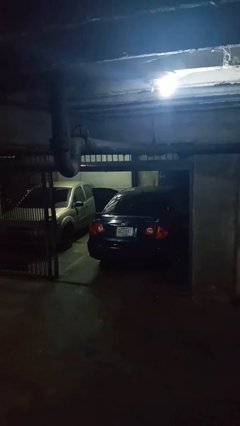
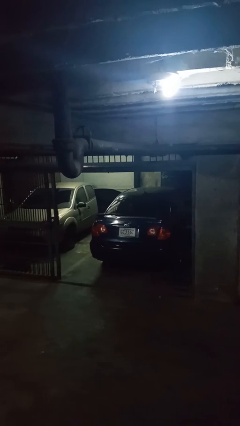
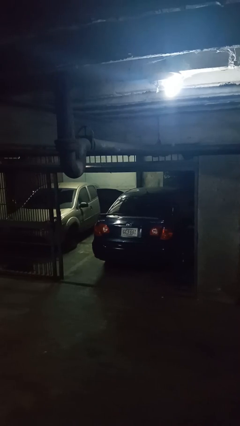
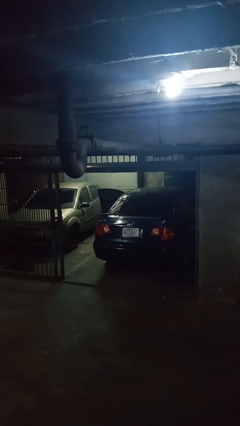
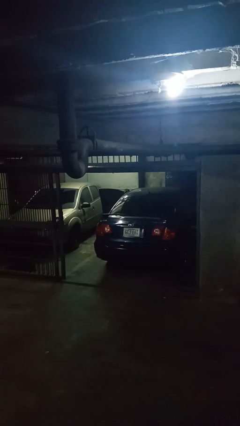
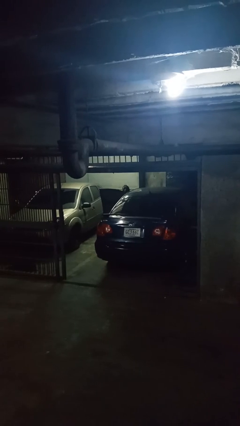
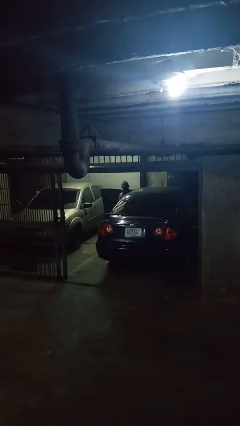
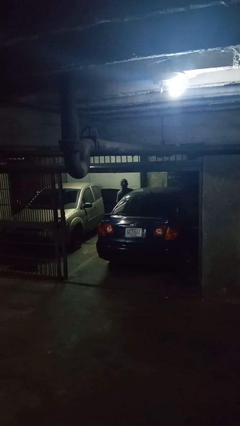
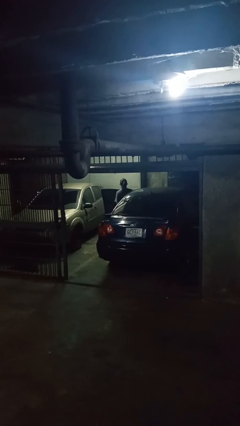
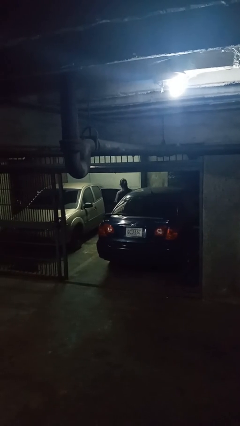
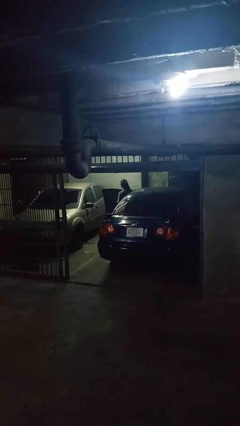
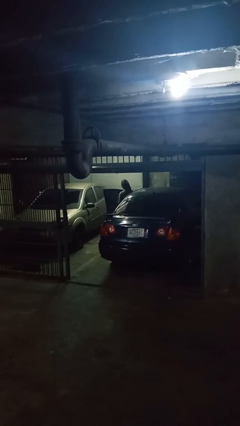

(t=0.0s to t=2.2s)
person exits car

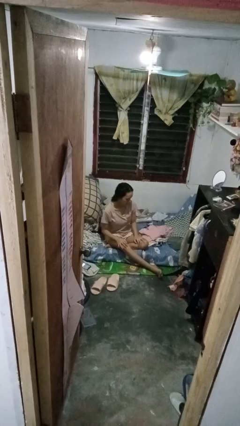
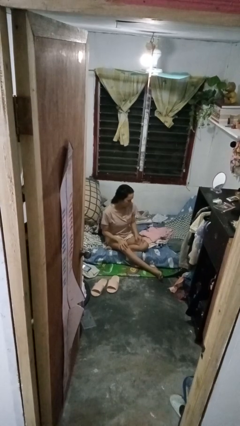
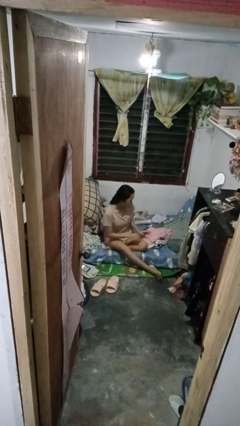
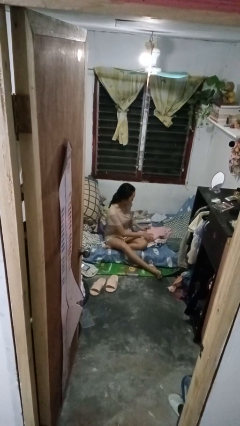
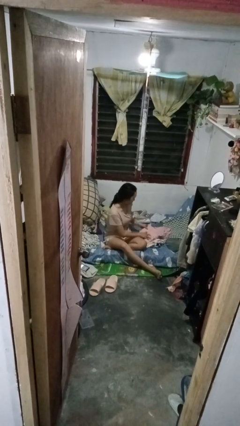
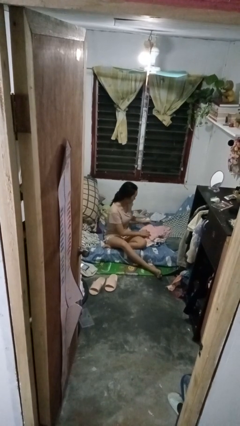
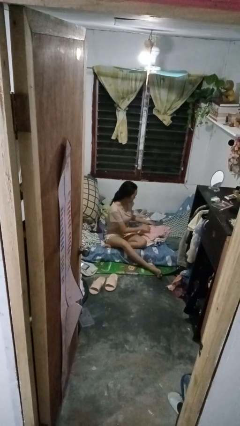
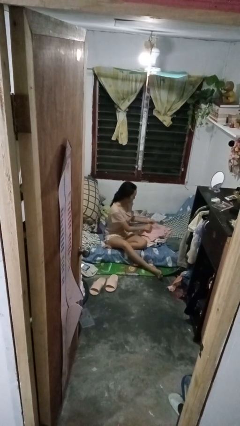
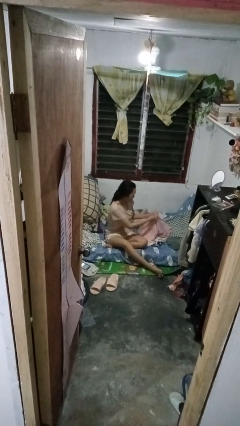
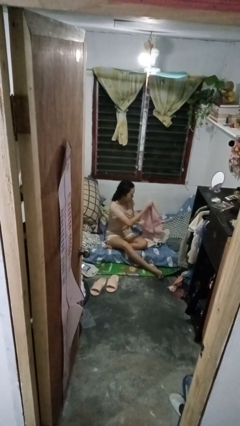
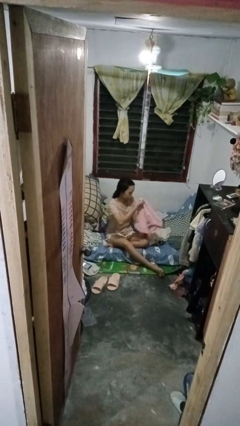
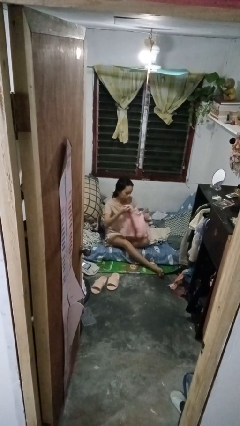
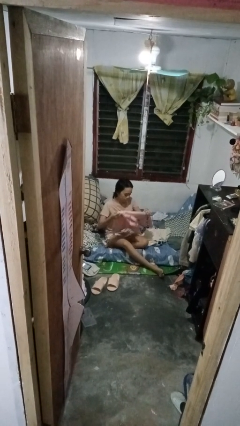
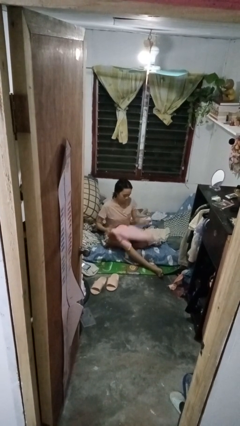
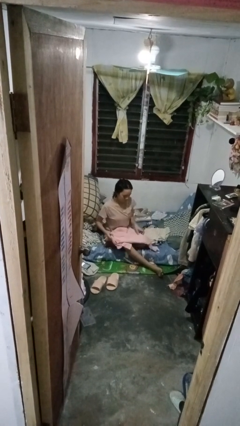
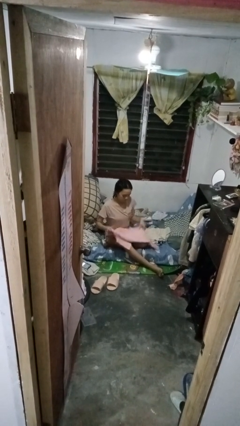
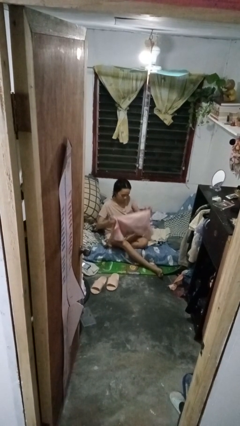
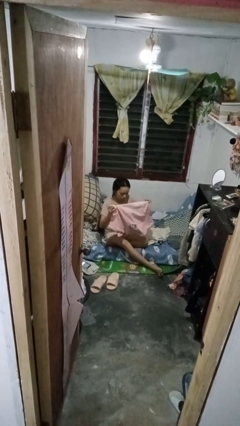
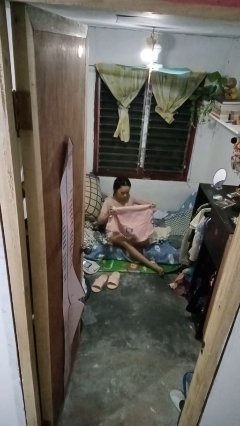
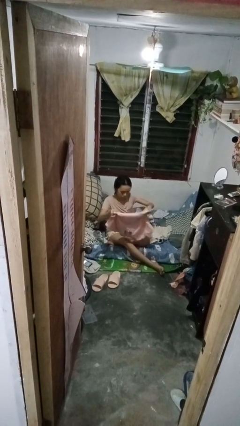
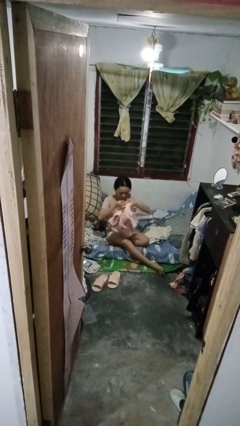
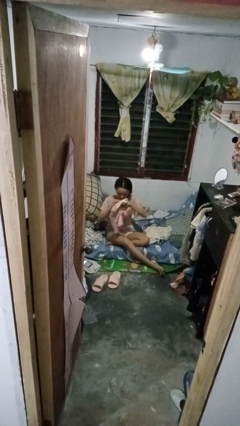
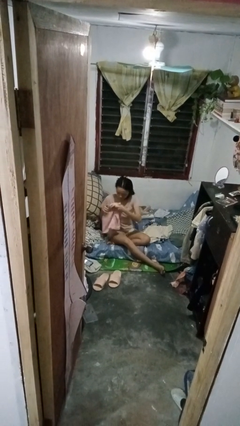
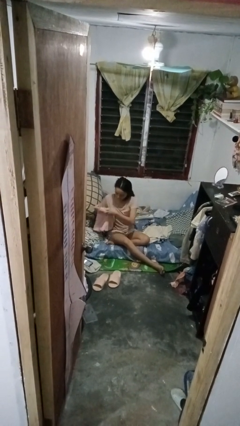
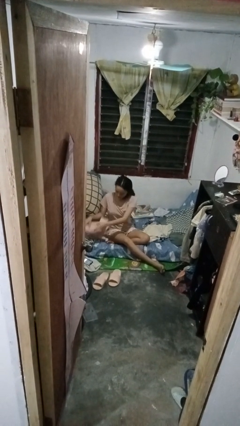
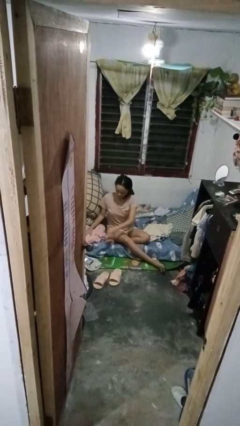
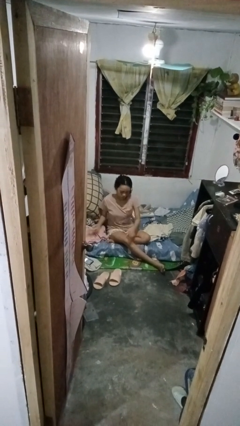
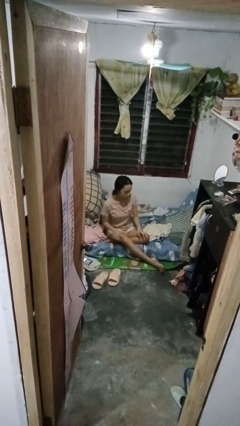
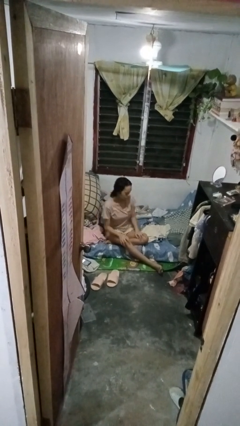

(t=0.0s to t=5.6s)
person folds shirt

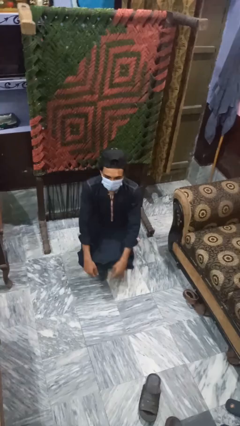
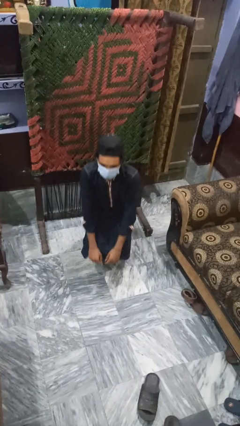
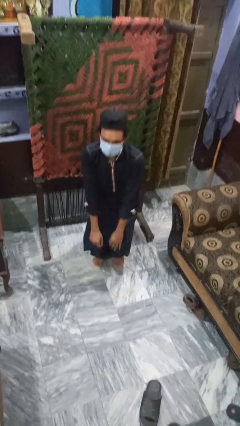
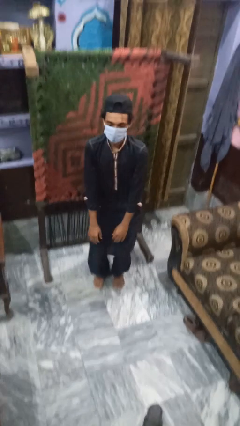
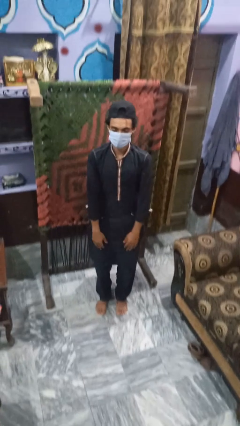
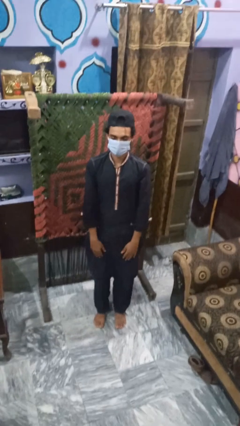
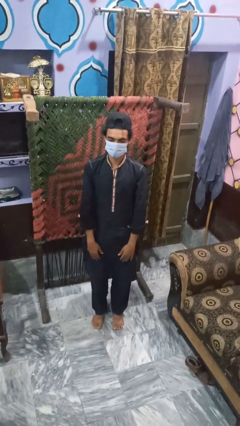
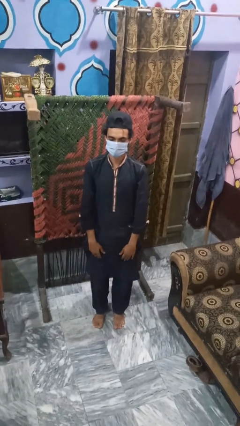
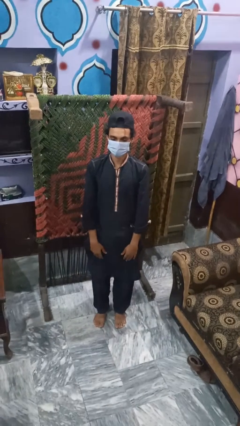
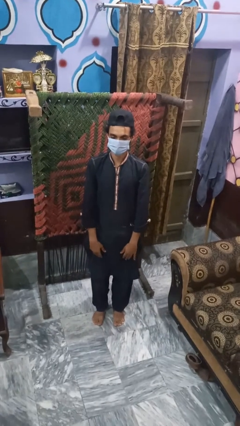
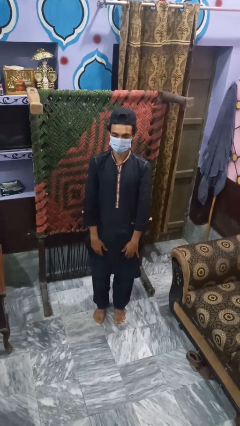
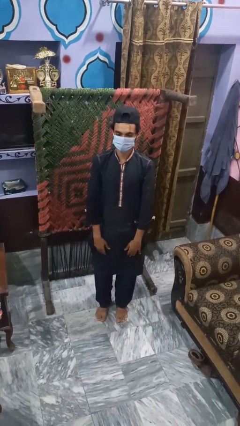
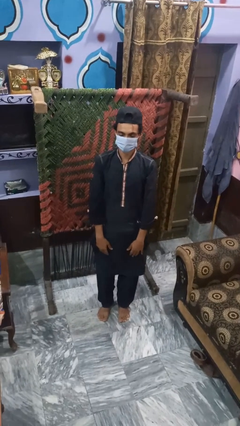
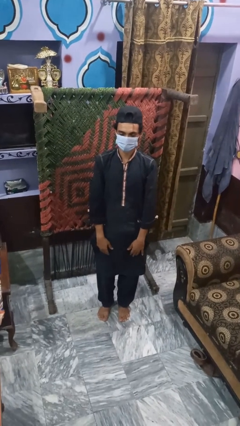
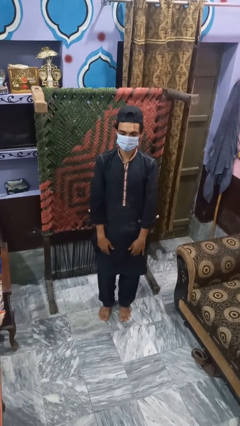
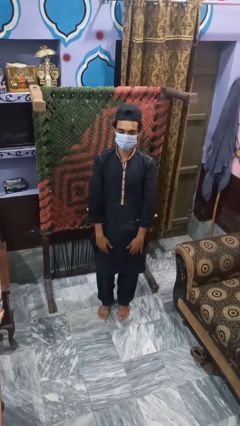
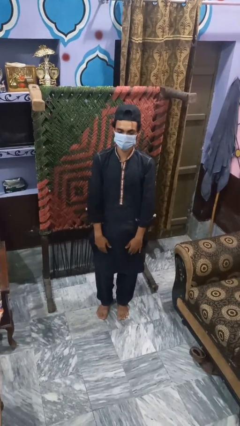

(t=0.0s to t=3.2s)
person stands up

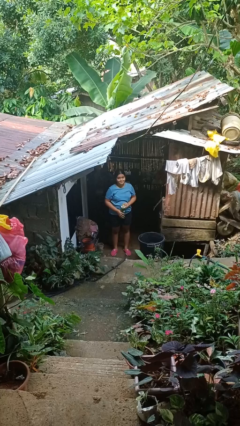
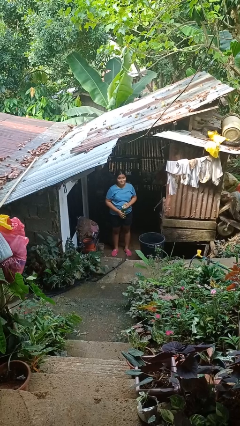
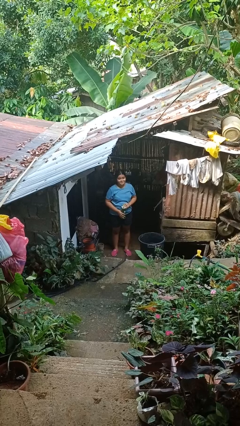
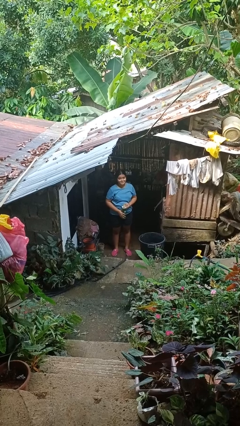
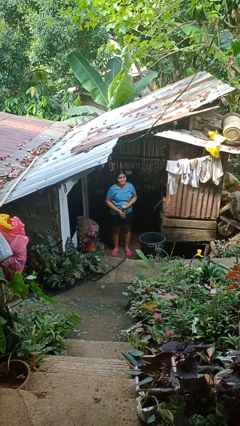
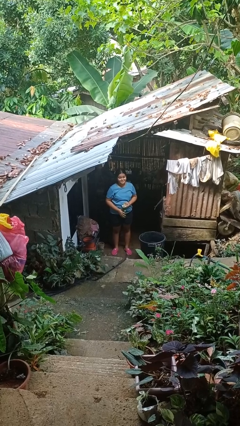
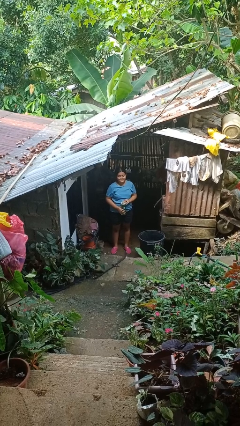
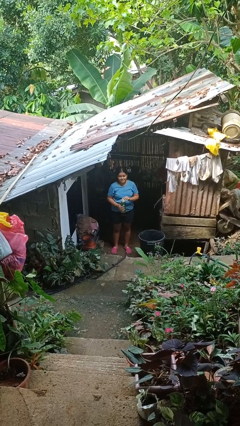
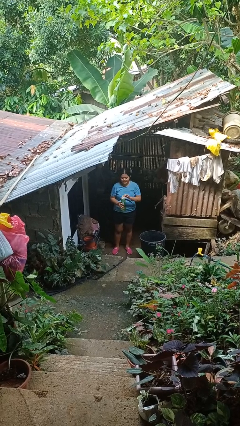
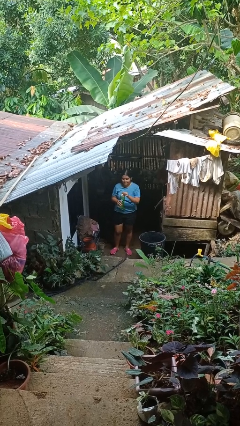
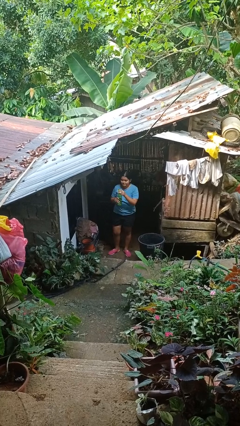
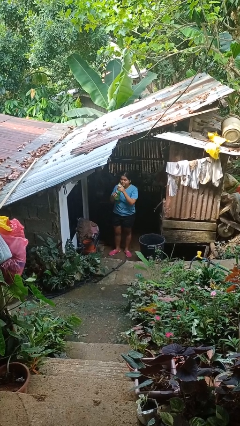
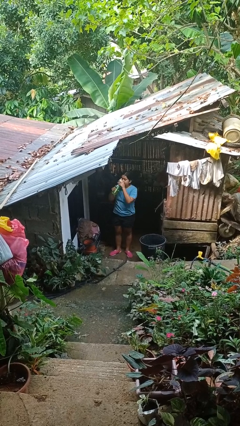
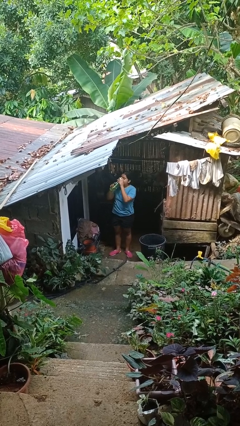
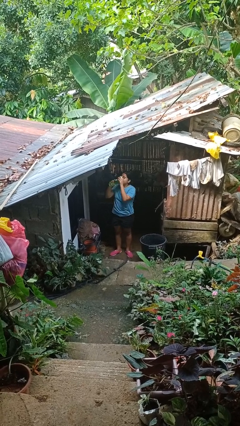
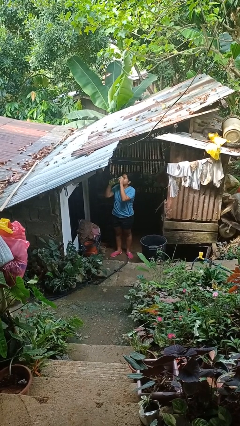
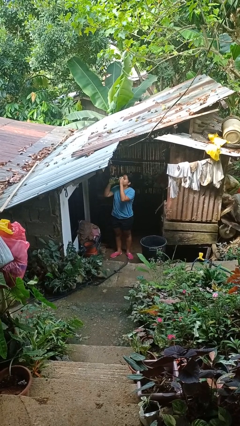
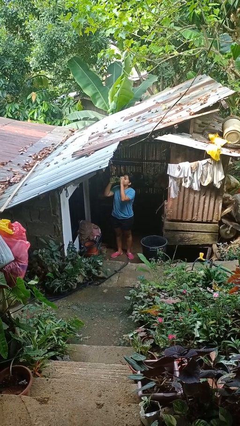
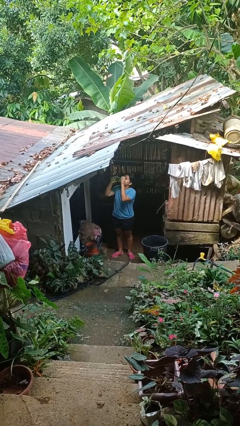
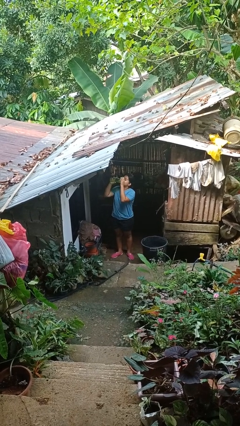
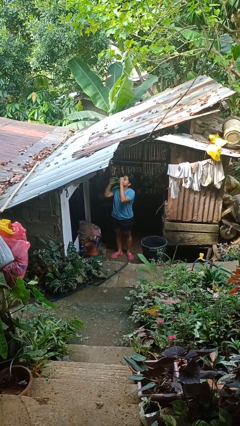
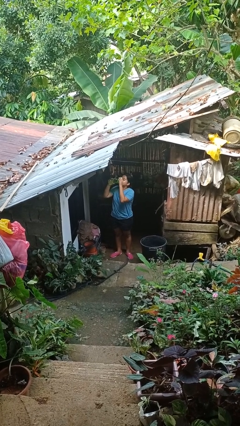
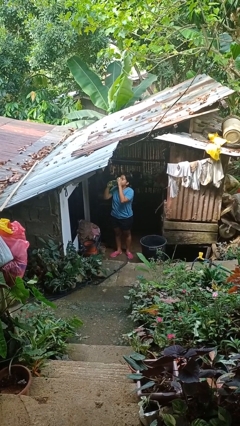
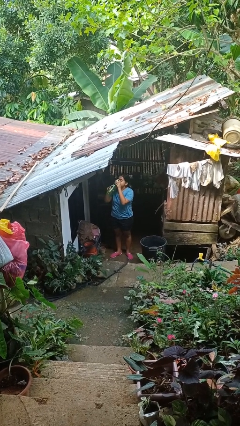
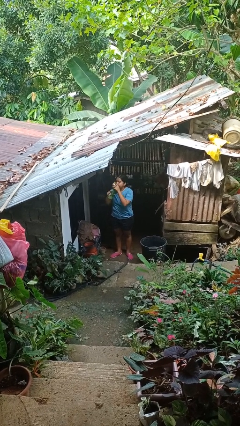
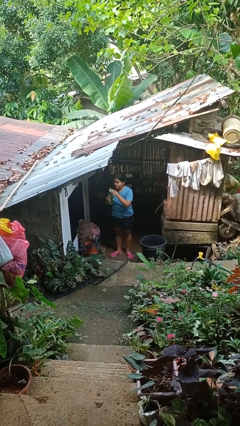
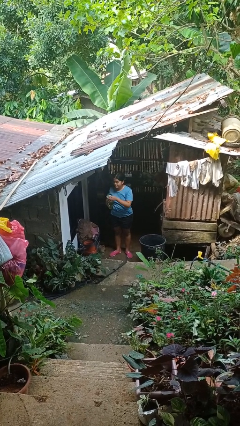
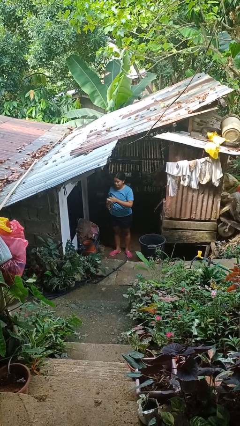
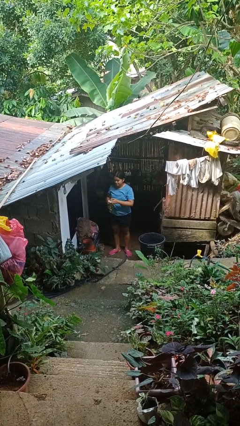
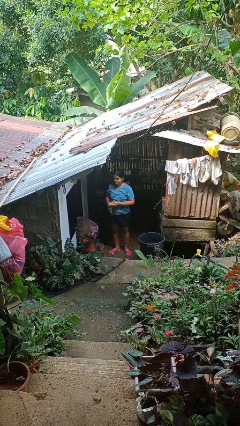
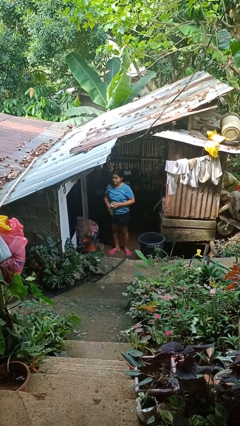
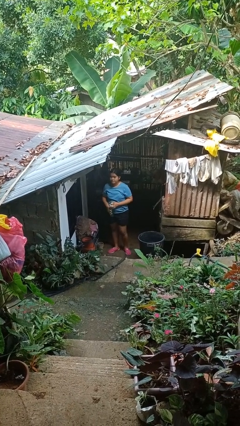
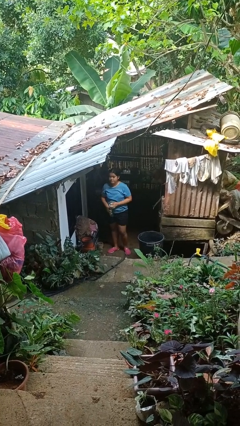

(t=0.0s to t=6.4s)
person drinks from bottle
